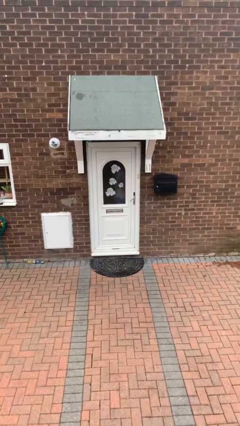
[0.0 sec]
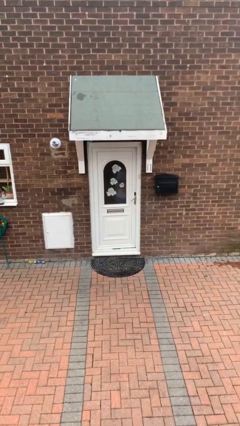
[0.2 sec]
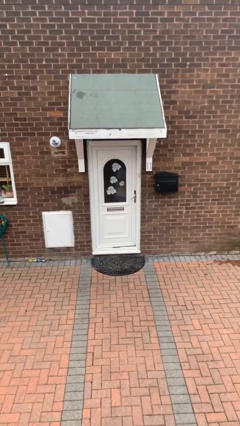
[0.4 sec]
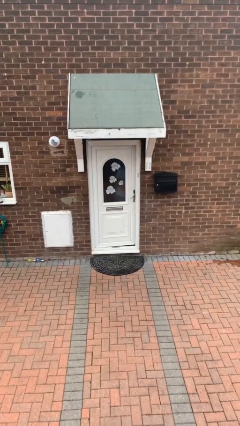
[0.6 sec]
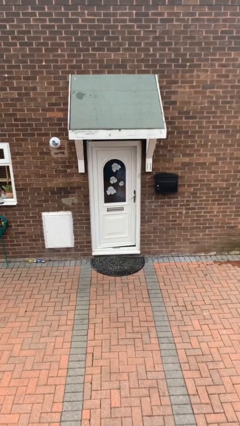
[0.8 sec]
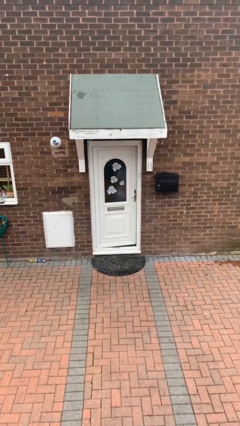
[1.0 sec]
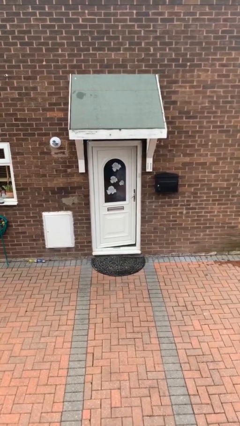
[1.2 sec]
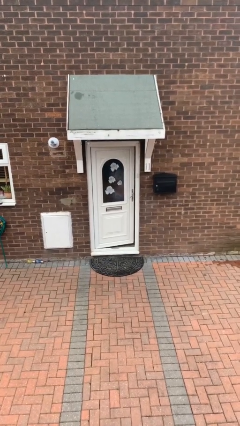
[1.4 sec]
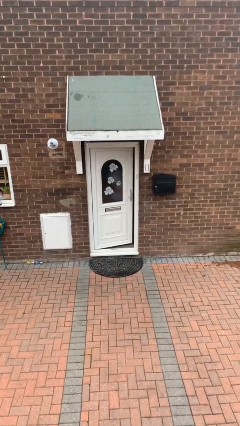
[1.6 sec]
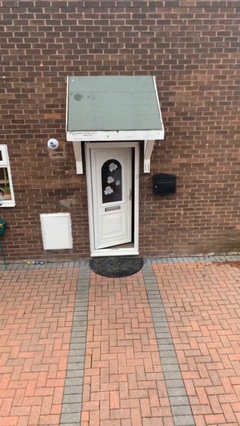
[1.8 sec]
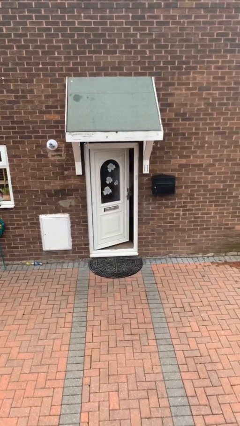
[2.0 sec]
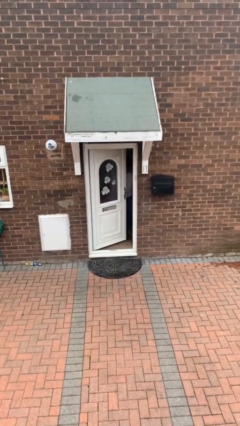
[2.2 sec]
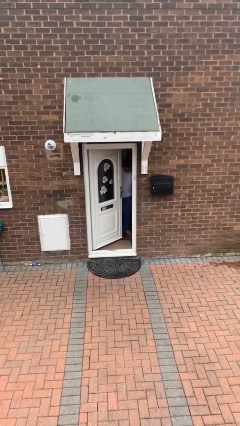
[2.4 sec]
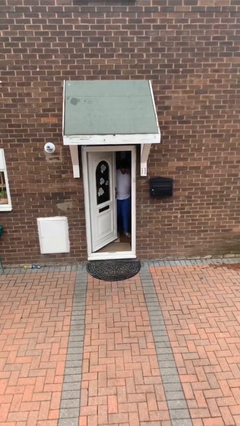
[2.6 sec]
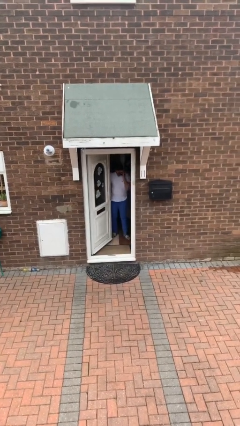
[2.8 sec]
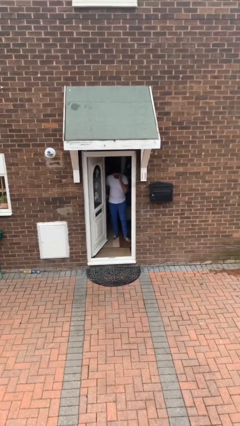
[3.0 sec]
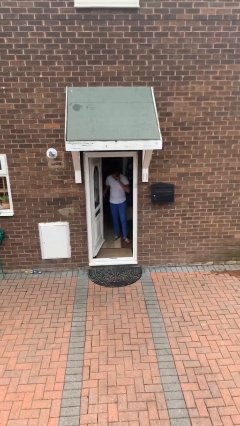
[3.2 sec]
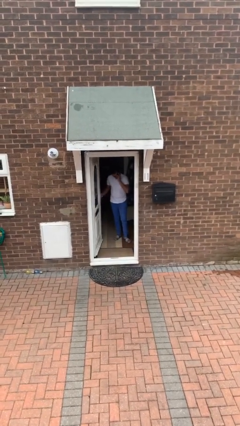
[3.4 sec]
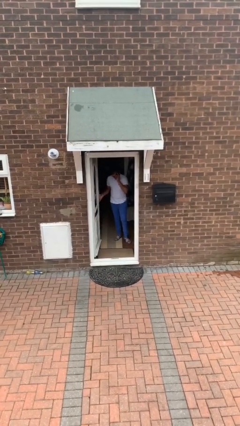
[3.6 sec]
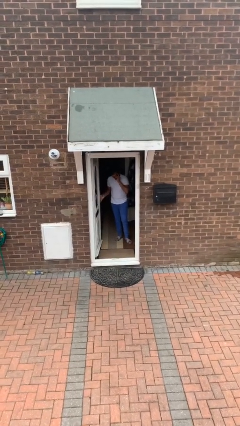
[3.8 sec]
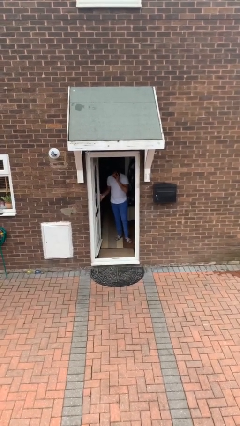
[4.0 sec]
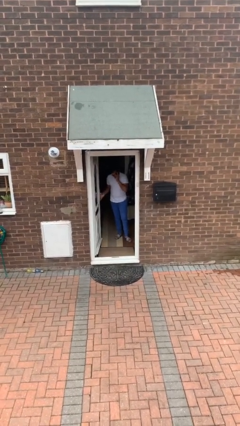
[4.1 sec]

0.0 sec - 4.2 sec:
person opens facility door

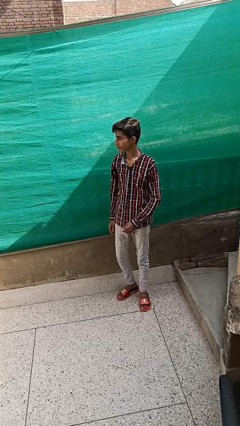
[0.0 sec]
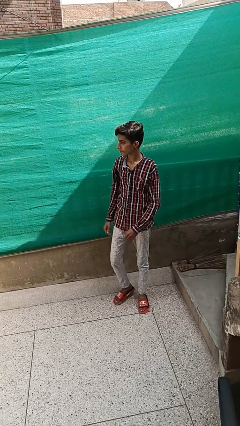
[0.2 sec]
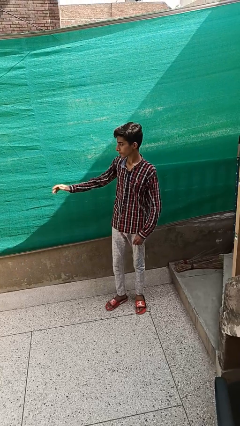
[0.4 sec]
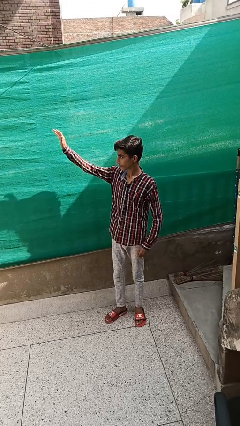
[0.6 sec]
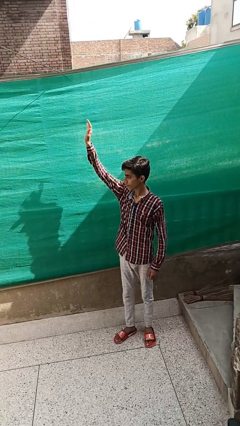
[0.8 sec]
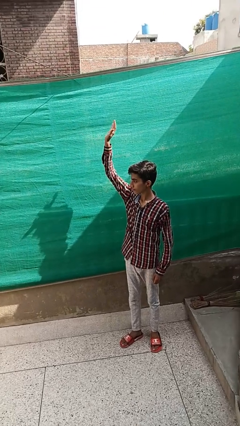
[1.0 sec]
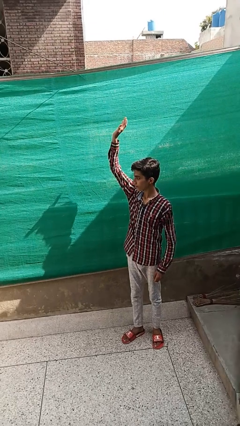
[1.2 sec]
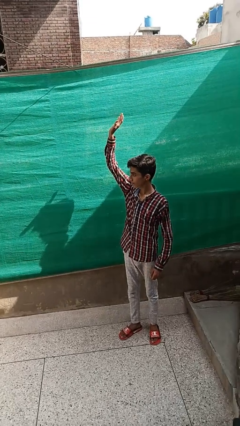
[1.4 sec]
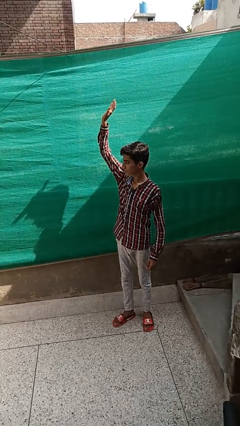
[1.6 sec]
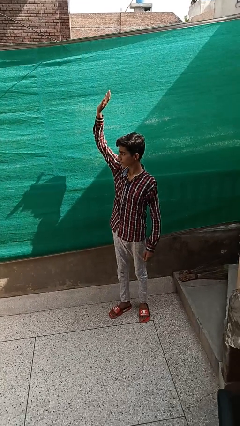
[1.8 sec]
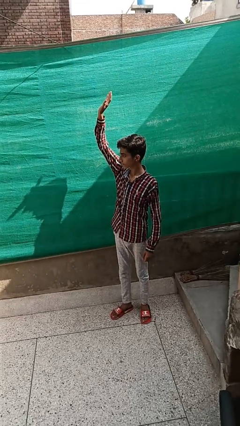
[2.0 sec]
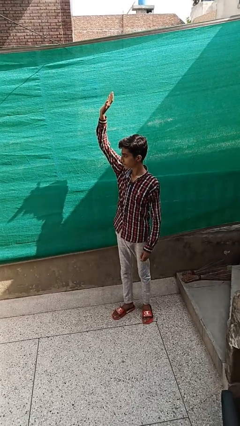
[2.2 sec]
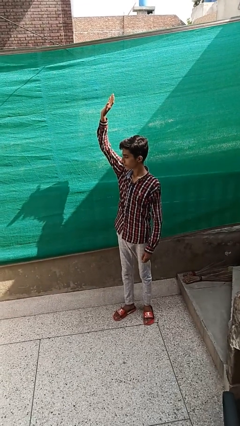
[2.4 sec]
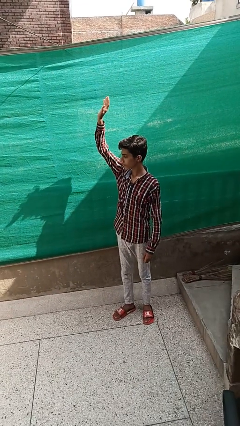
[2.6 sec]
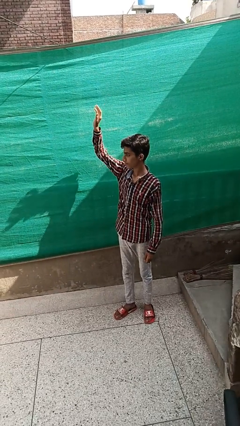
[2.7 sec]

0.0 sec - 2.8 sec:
person gestures raise hand

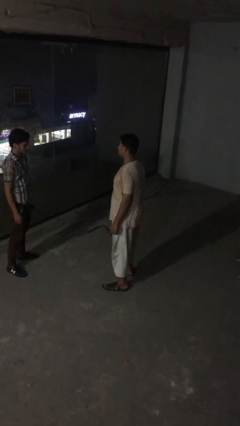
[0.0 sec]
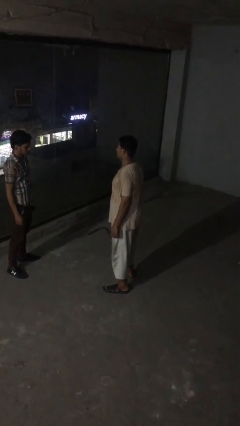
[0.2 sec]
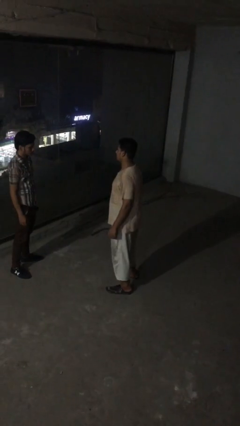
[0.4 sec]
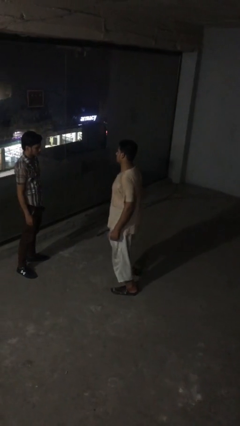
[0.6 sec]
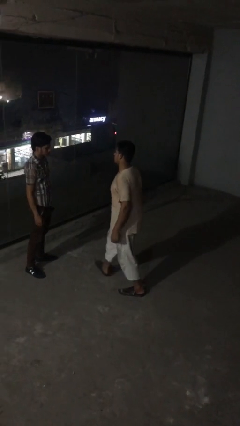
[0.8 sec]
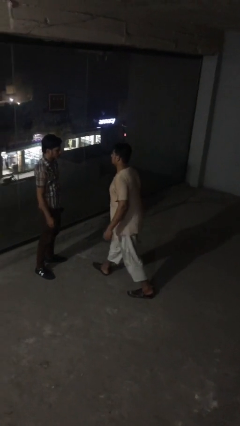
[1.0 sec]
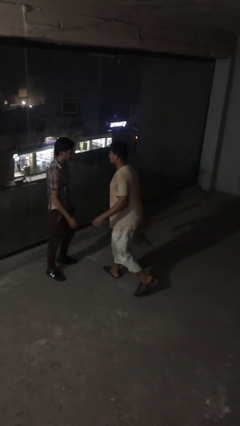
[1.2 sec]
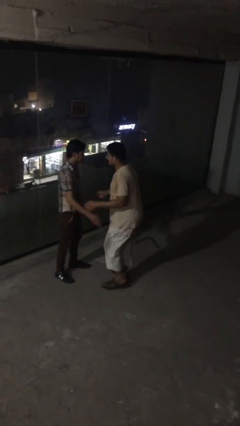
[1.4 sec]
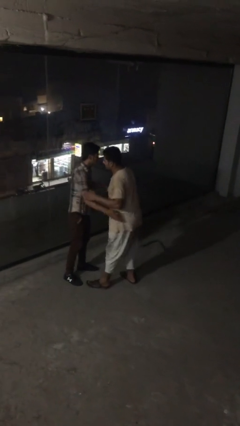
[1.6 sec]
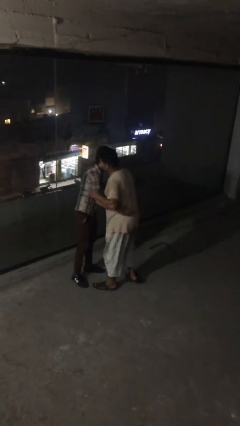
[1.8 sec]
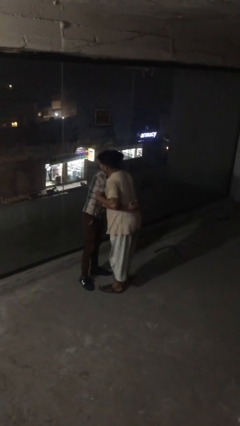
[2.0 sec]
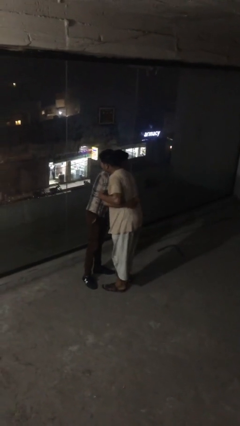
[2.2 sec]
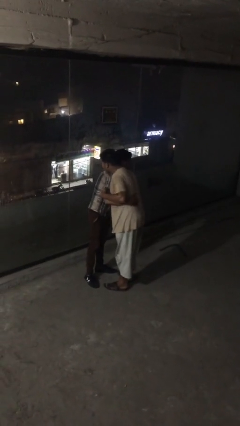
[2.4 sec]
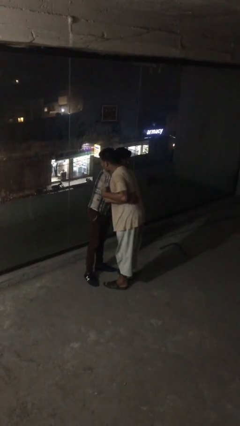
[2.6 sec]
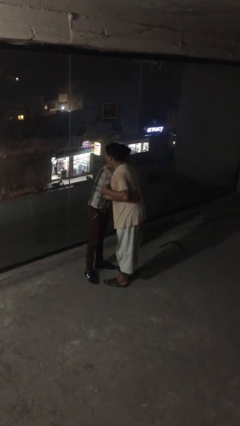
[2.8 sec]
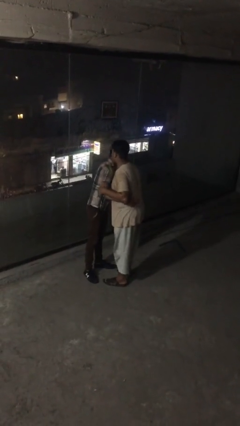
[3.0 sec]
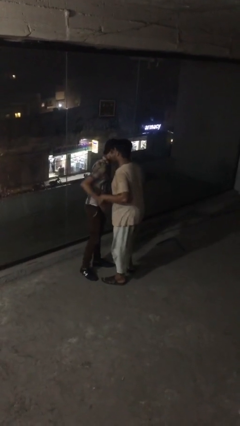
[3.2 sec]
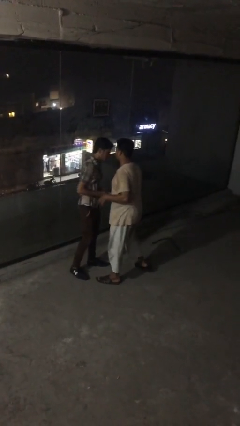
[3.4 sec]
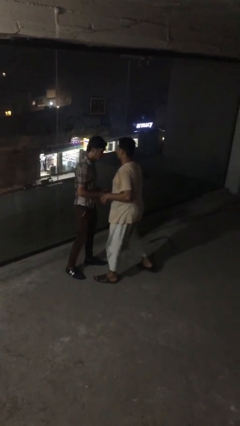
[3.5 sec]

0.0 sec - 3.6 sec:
person embraces person

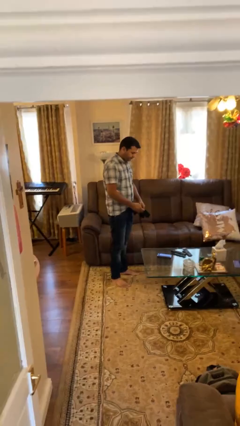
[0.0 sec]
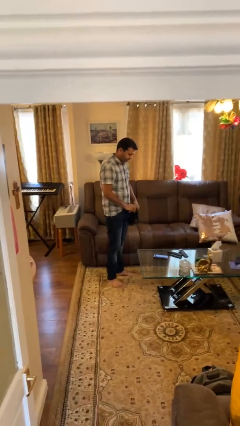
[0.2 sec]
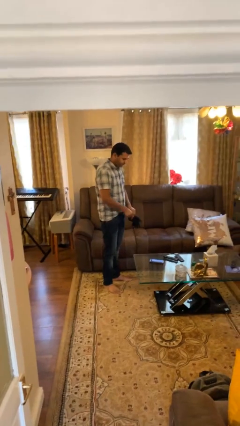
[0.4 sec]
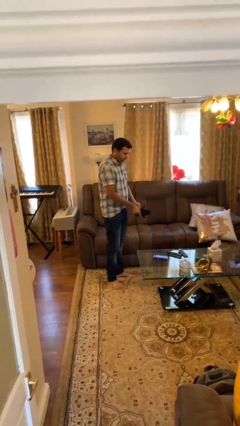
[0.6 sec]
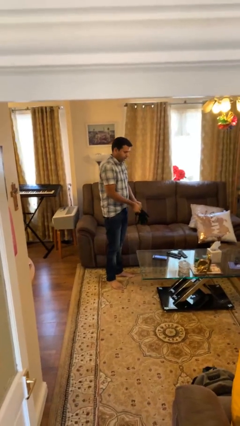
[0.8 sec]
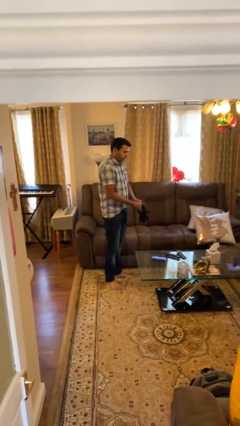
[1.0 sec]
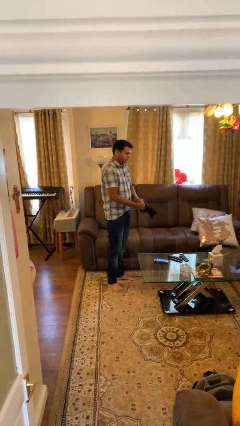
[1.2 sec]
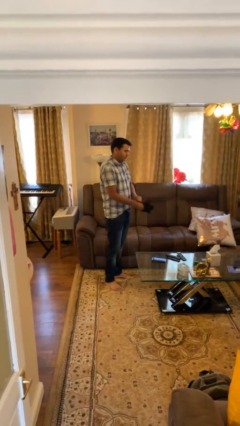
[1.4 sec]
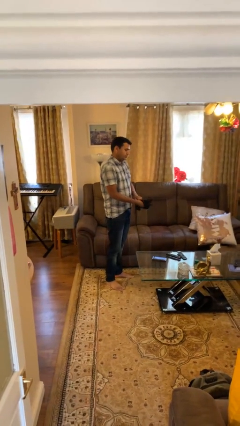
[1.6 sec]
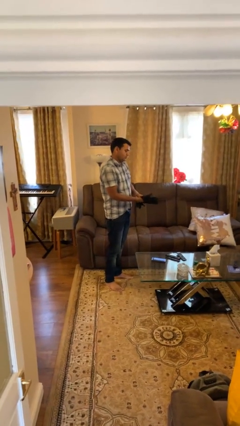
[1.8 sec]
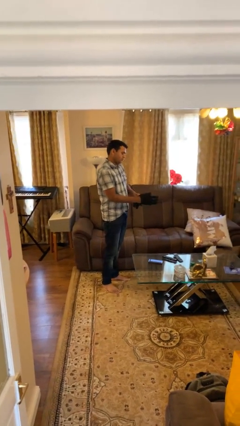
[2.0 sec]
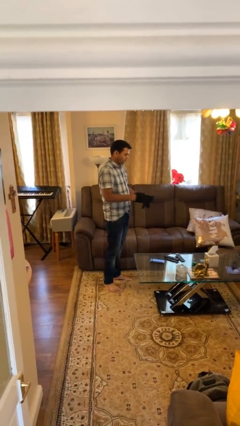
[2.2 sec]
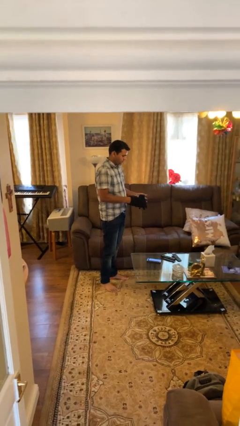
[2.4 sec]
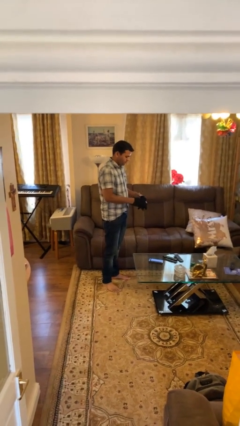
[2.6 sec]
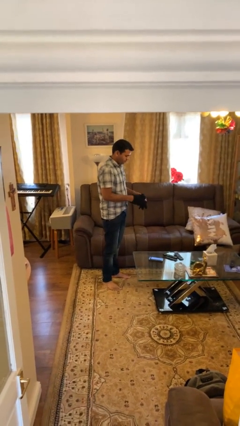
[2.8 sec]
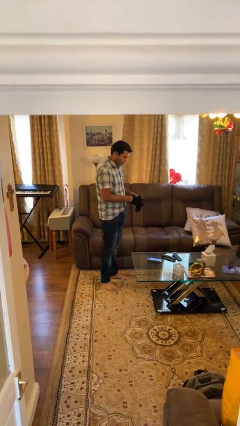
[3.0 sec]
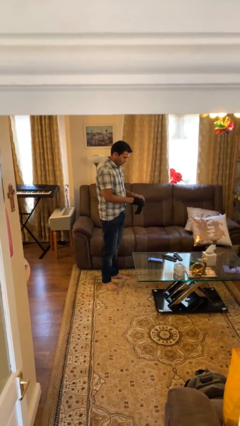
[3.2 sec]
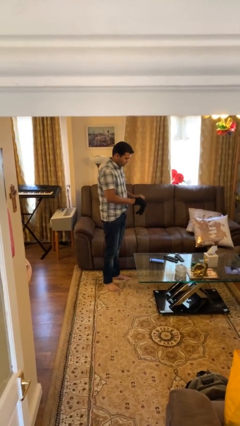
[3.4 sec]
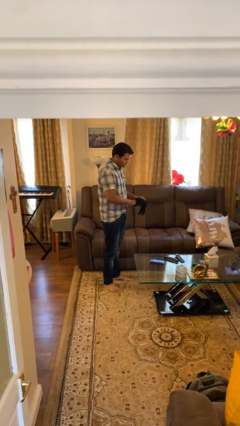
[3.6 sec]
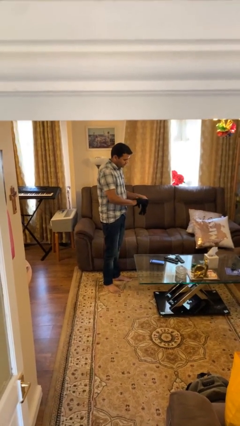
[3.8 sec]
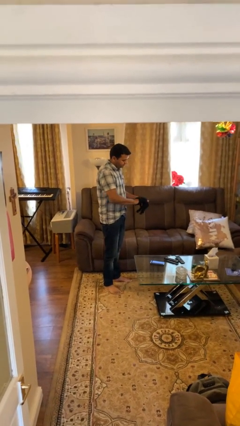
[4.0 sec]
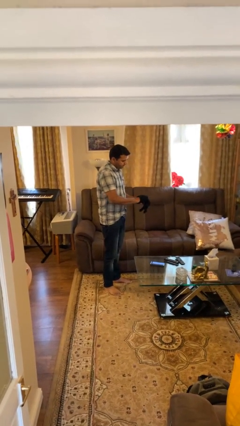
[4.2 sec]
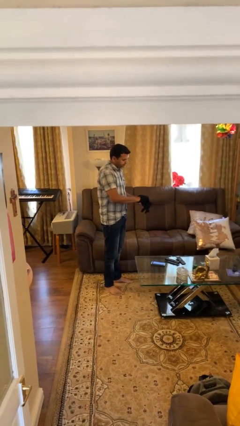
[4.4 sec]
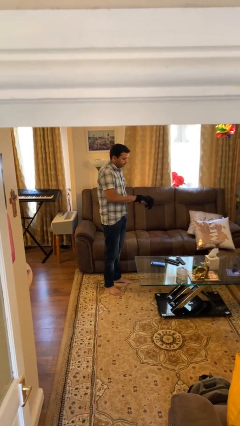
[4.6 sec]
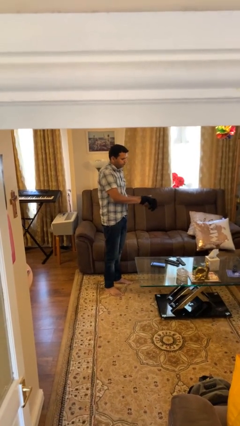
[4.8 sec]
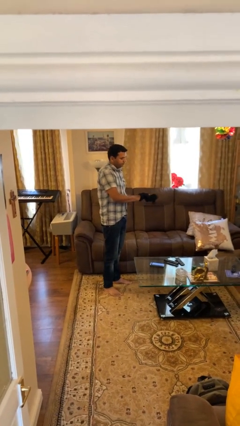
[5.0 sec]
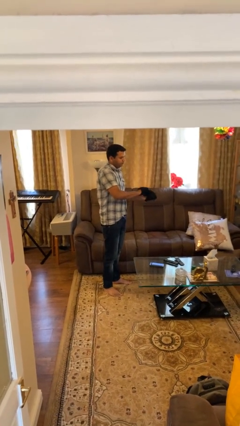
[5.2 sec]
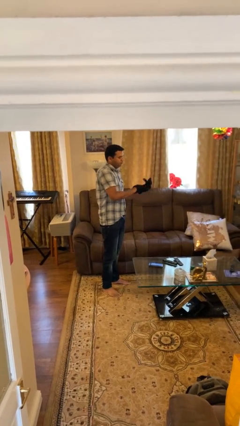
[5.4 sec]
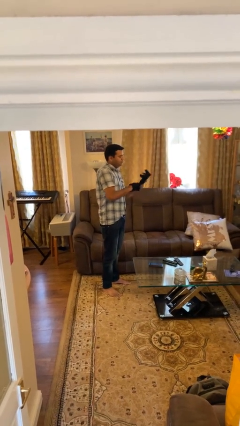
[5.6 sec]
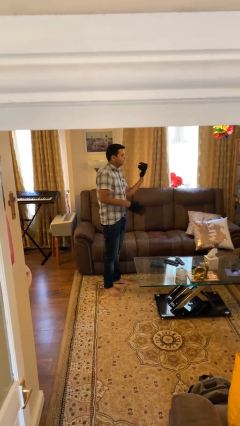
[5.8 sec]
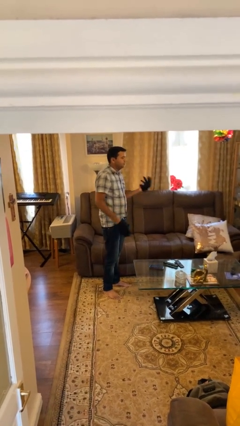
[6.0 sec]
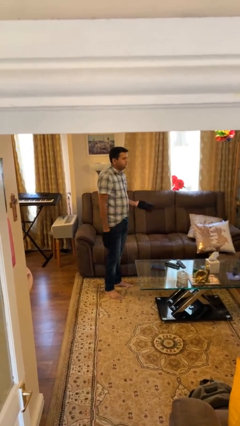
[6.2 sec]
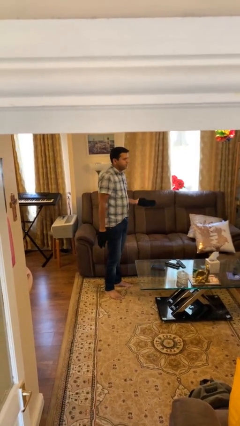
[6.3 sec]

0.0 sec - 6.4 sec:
person puts on gloves
